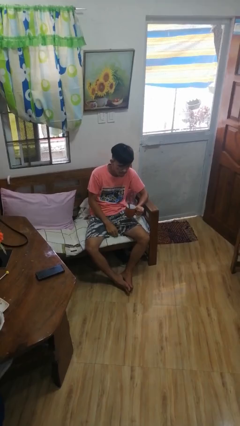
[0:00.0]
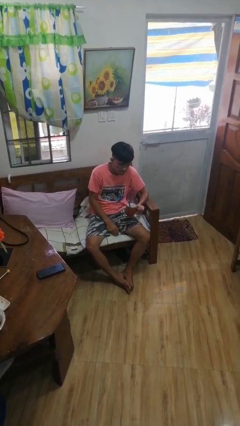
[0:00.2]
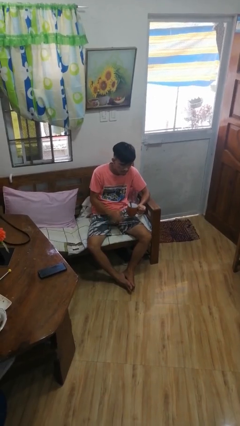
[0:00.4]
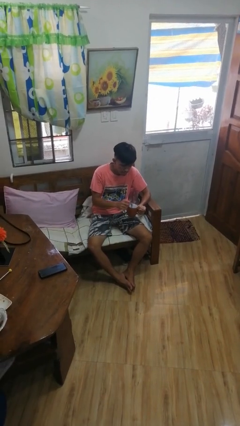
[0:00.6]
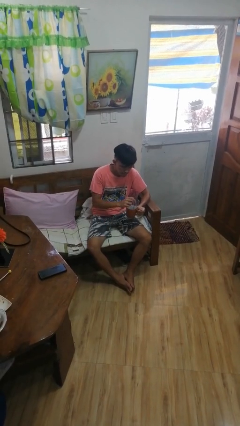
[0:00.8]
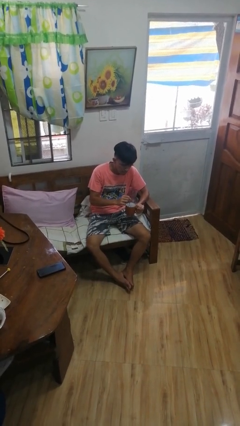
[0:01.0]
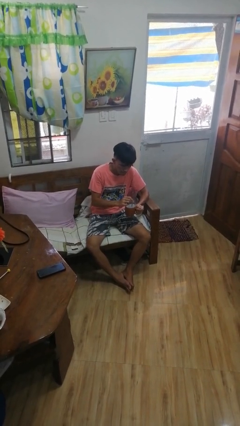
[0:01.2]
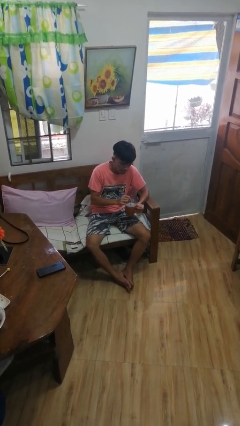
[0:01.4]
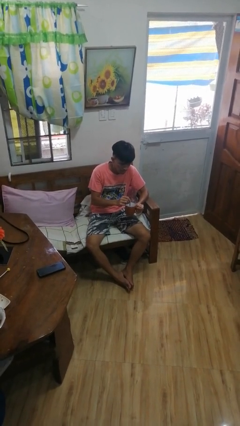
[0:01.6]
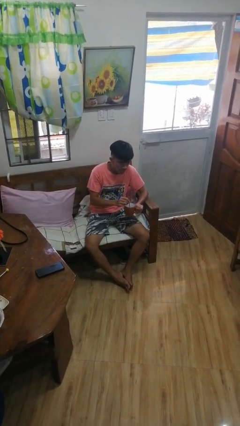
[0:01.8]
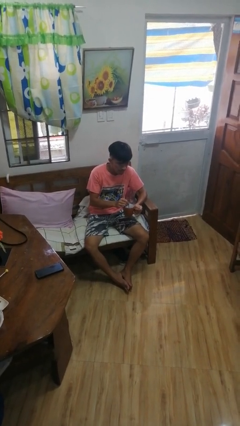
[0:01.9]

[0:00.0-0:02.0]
person stirs mug

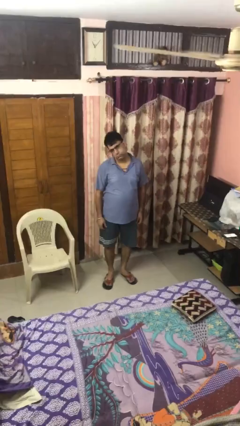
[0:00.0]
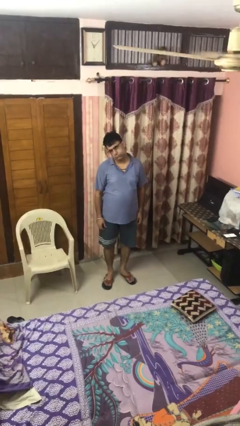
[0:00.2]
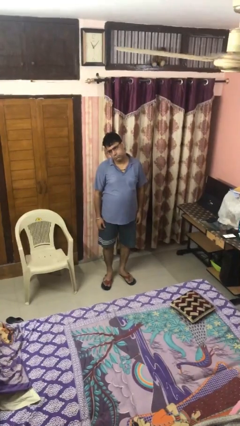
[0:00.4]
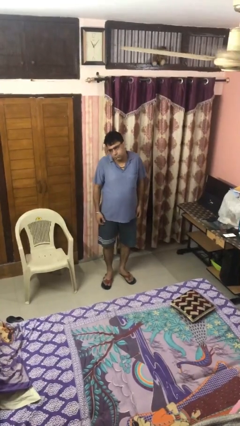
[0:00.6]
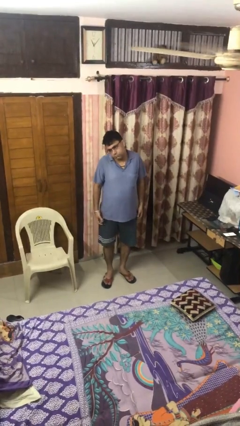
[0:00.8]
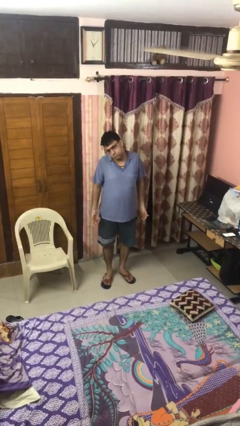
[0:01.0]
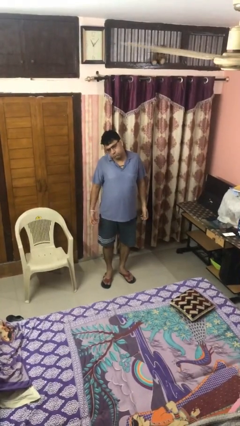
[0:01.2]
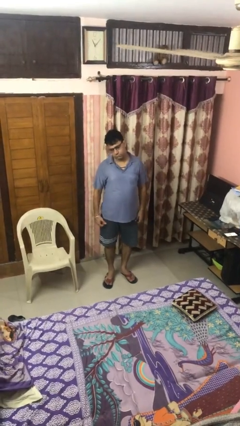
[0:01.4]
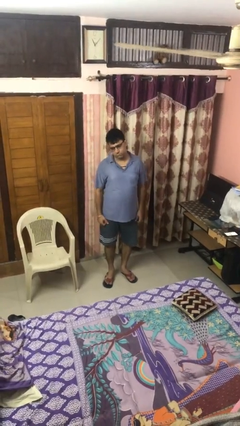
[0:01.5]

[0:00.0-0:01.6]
person shrugs

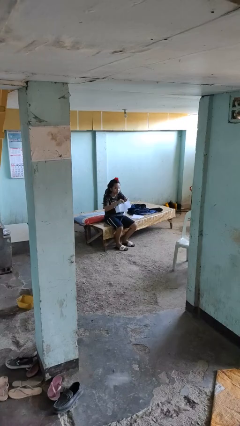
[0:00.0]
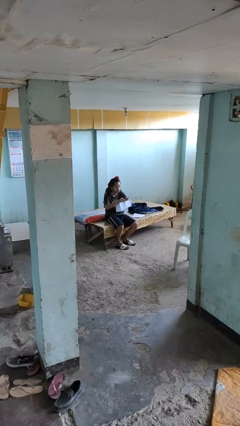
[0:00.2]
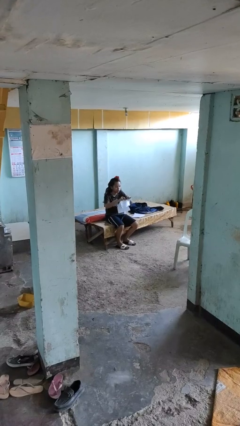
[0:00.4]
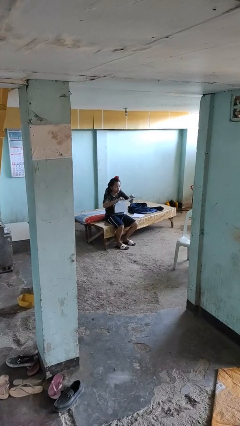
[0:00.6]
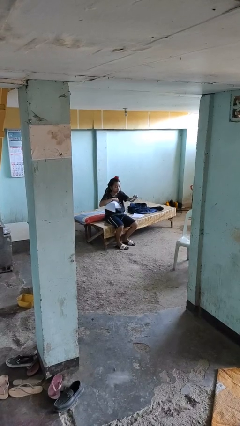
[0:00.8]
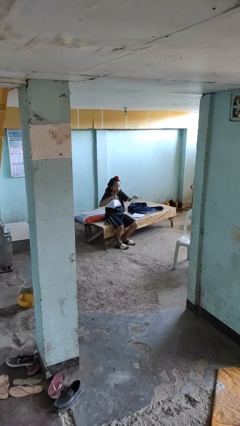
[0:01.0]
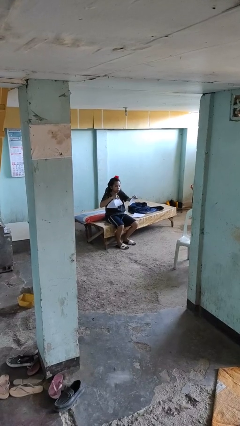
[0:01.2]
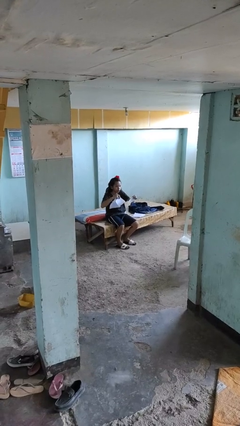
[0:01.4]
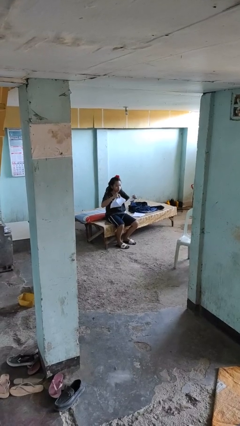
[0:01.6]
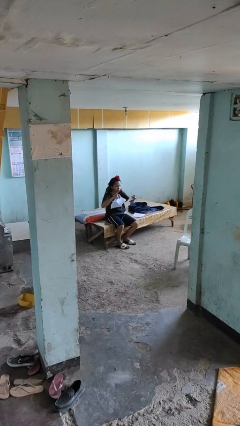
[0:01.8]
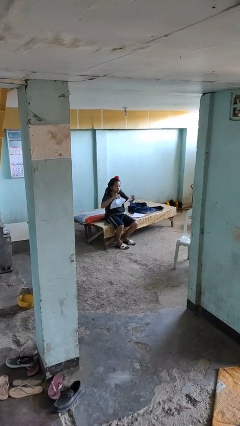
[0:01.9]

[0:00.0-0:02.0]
person tears paper

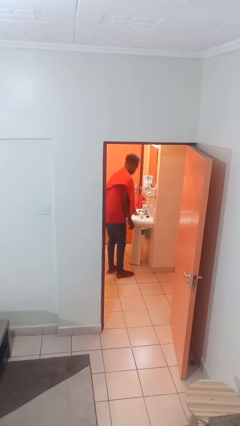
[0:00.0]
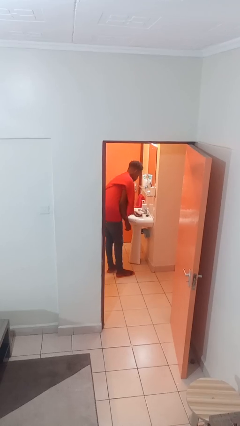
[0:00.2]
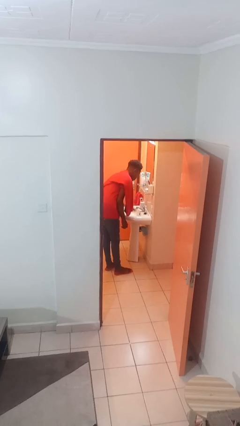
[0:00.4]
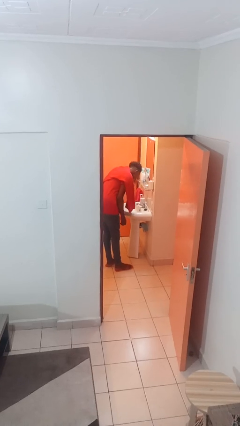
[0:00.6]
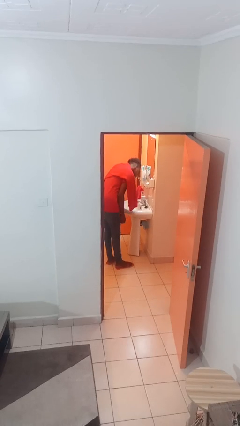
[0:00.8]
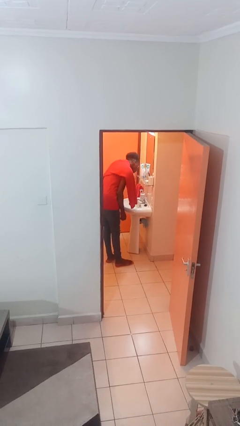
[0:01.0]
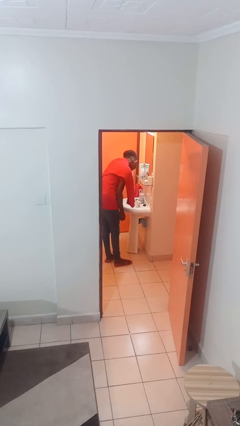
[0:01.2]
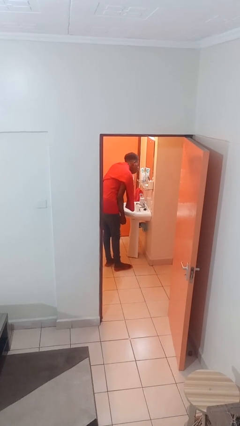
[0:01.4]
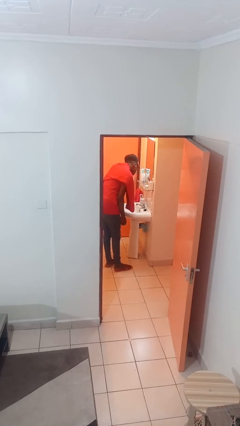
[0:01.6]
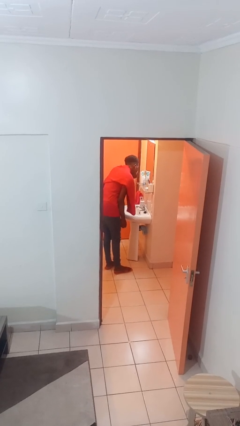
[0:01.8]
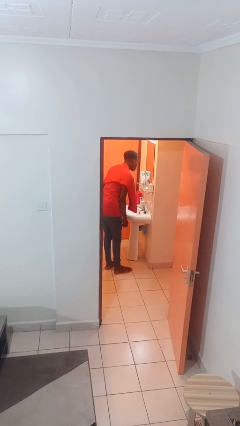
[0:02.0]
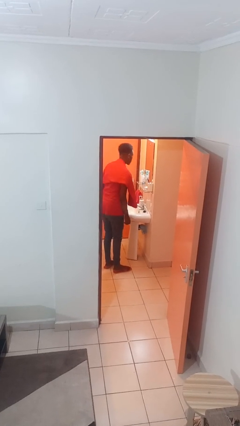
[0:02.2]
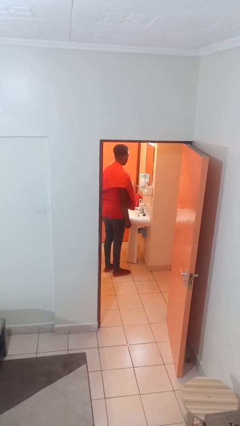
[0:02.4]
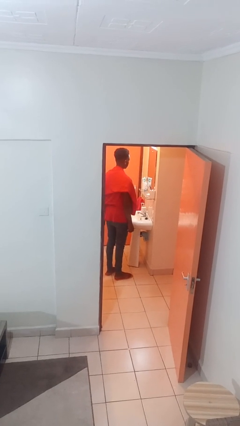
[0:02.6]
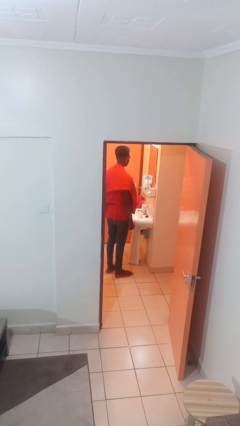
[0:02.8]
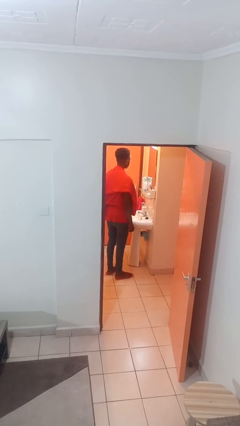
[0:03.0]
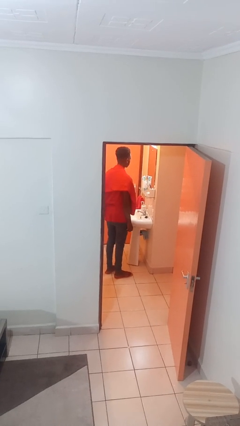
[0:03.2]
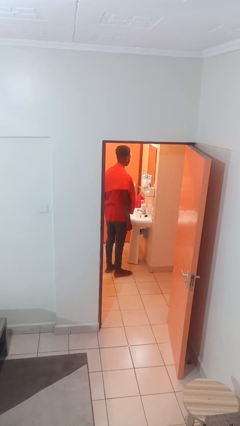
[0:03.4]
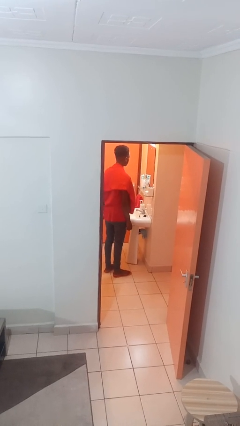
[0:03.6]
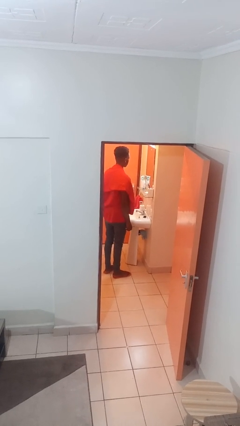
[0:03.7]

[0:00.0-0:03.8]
person washes face

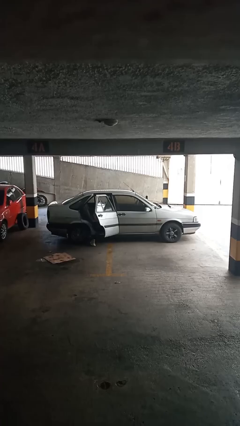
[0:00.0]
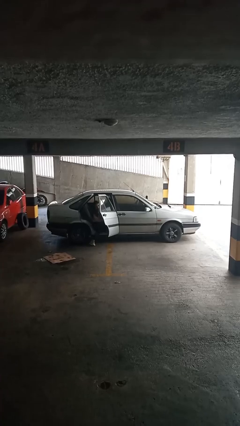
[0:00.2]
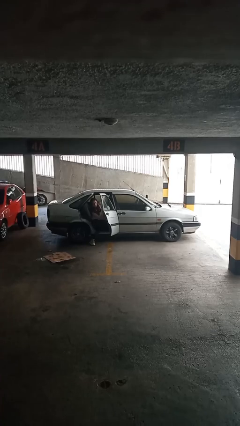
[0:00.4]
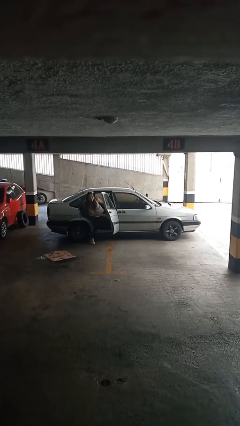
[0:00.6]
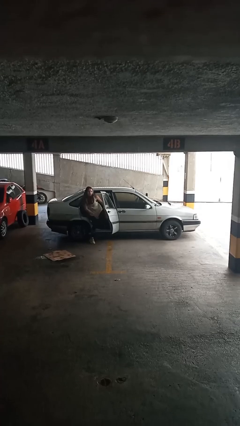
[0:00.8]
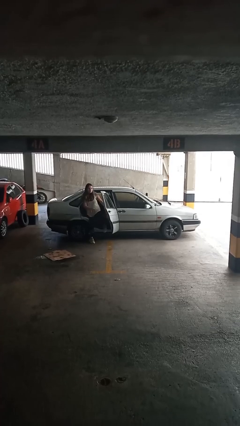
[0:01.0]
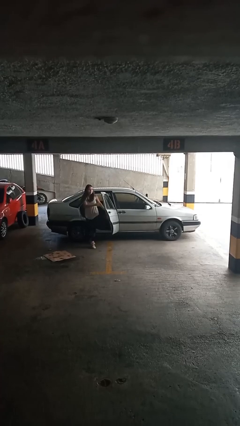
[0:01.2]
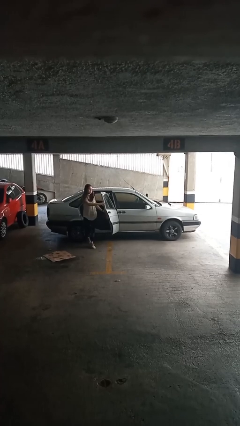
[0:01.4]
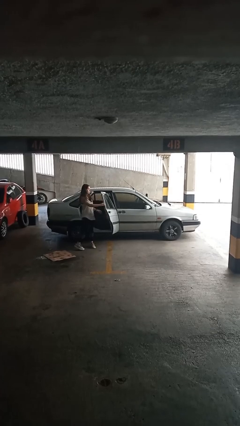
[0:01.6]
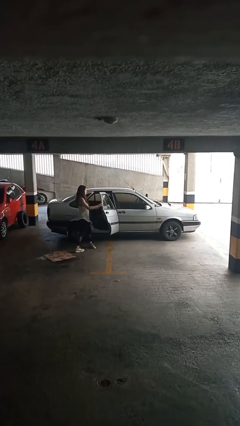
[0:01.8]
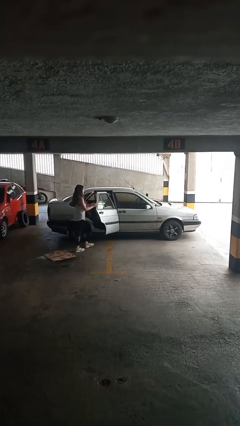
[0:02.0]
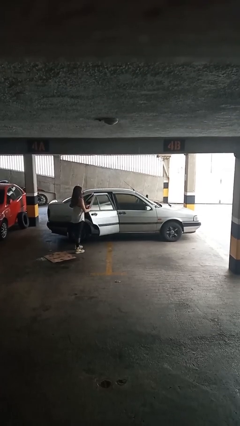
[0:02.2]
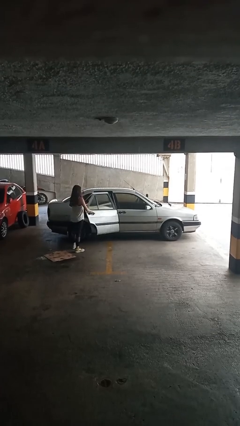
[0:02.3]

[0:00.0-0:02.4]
car drops off person

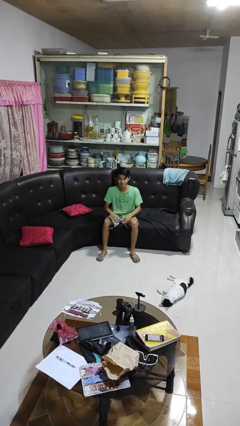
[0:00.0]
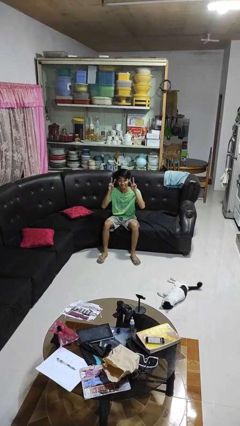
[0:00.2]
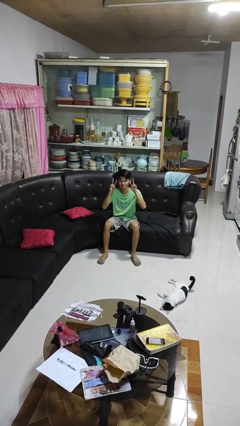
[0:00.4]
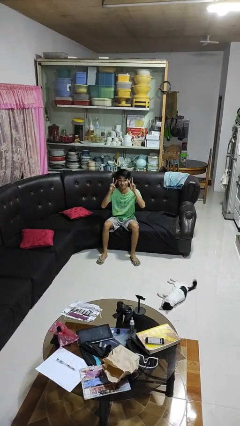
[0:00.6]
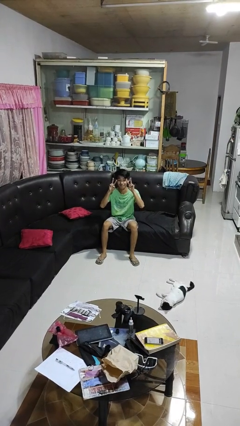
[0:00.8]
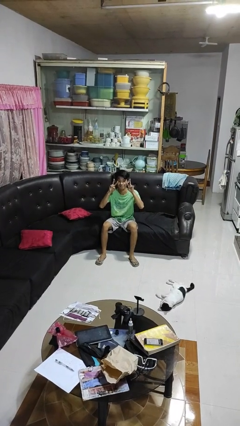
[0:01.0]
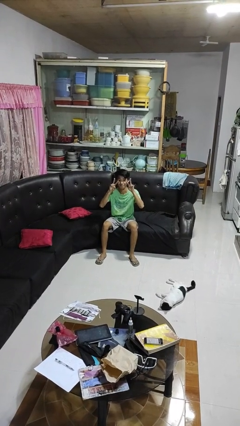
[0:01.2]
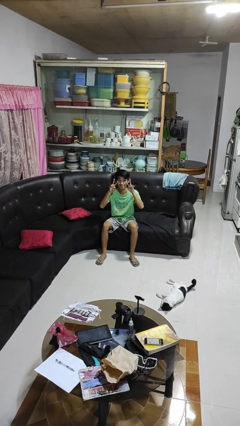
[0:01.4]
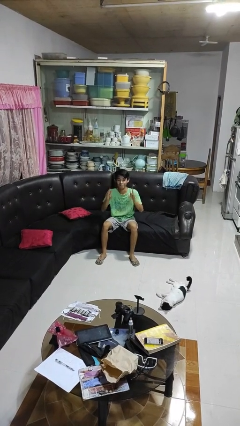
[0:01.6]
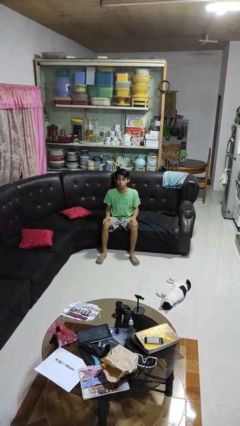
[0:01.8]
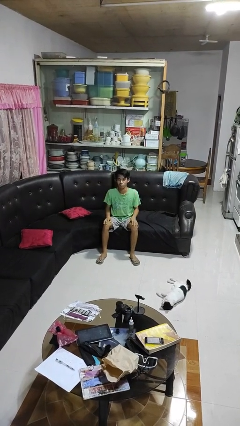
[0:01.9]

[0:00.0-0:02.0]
person gestures peace

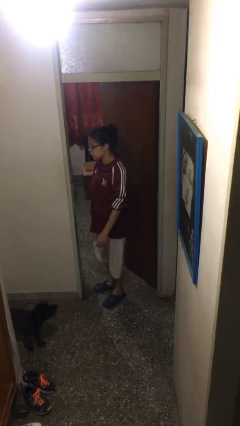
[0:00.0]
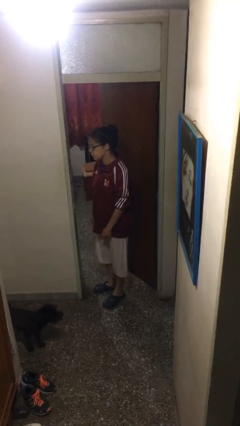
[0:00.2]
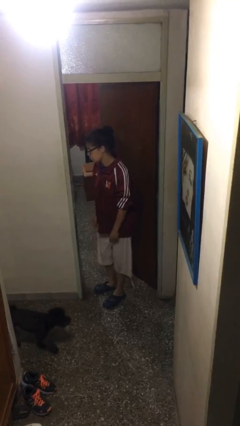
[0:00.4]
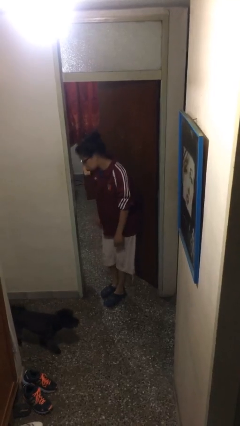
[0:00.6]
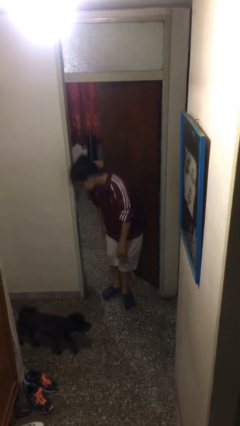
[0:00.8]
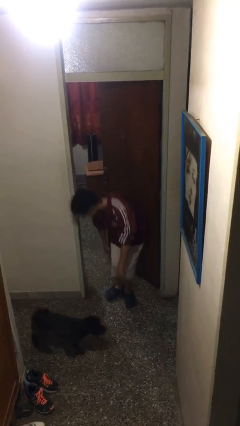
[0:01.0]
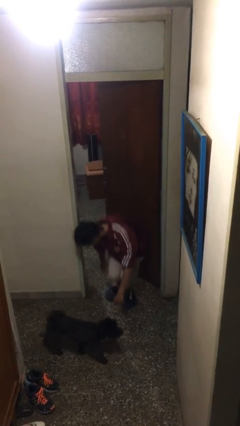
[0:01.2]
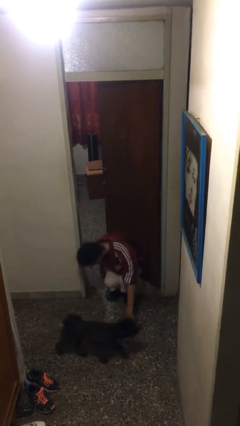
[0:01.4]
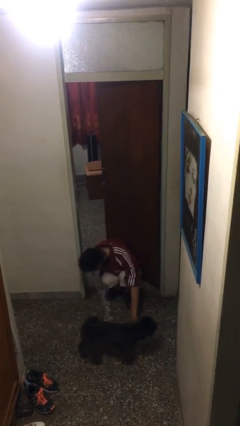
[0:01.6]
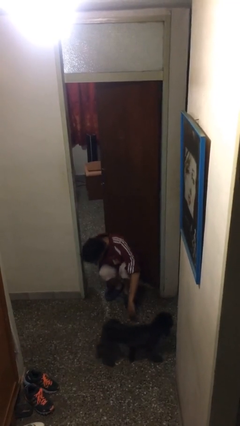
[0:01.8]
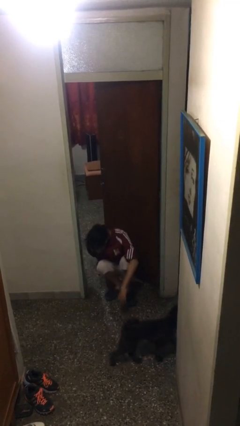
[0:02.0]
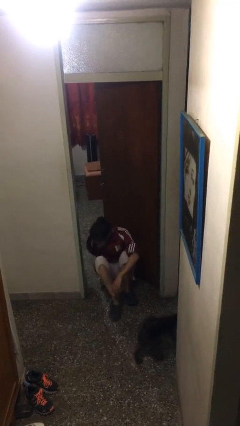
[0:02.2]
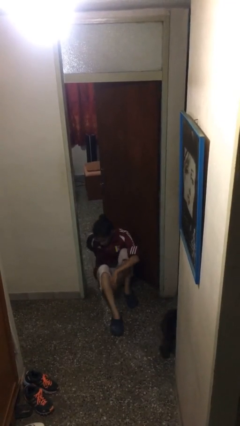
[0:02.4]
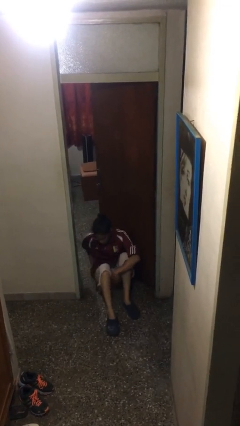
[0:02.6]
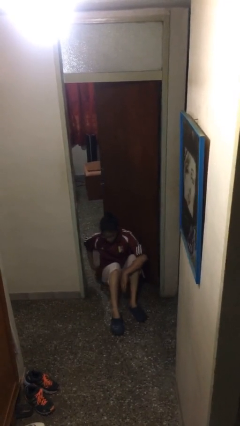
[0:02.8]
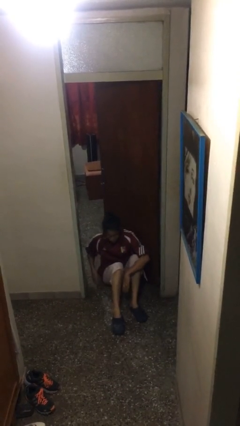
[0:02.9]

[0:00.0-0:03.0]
person sits down

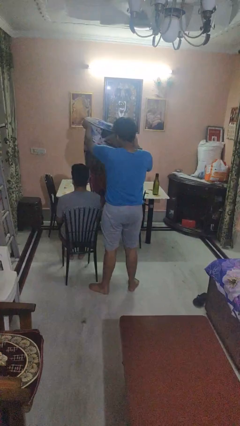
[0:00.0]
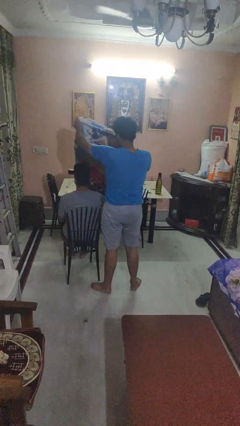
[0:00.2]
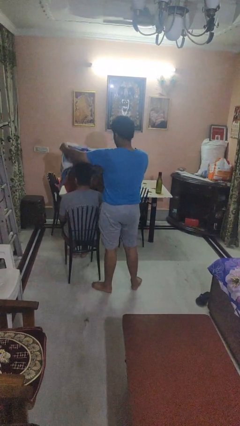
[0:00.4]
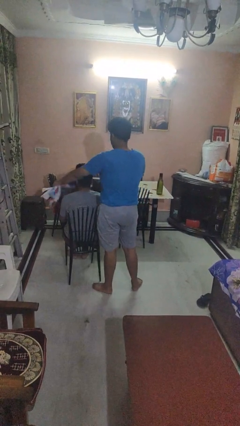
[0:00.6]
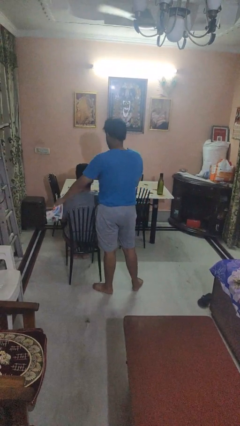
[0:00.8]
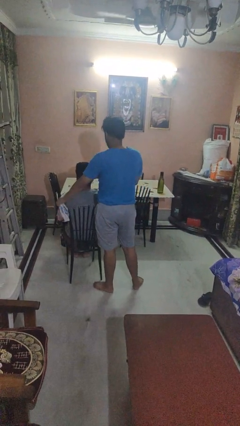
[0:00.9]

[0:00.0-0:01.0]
person covers friend with blanket
